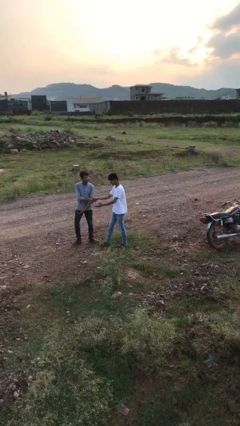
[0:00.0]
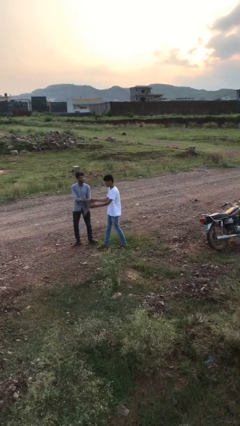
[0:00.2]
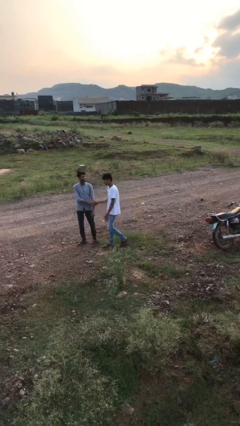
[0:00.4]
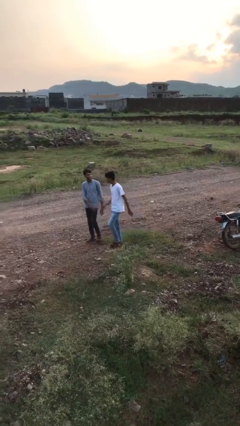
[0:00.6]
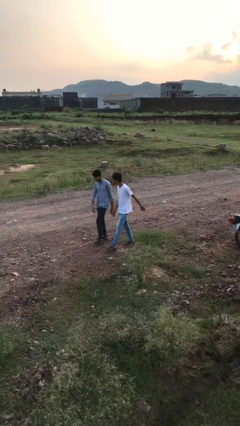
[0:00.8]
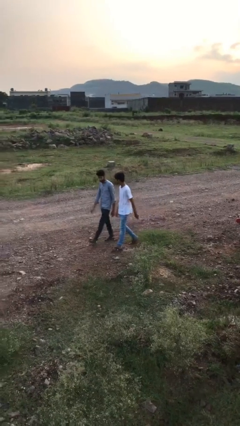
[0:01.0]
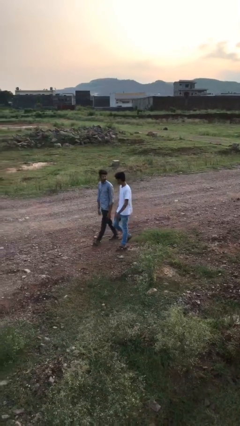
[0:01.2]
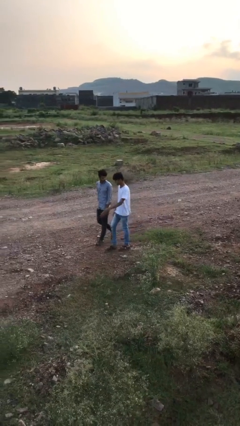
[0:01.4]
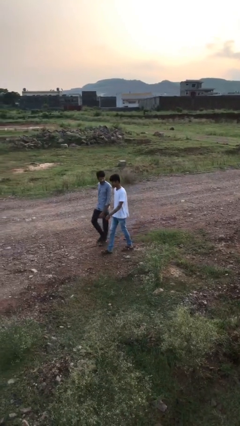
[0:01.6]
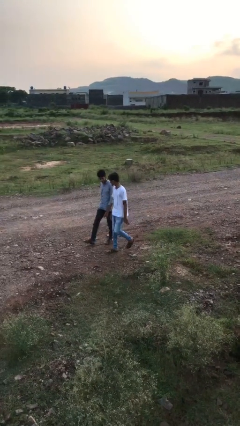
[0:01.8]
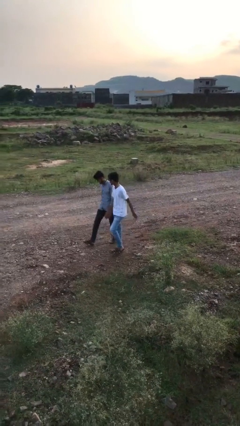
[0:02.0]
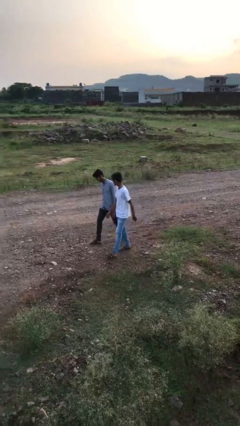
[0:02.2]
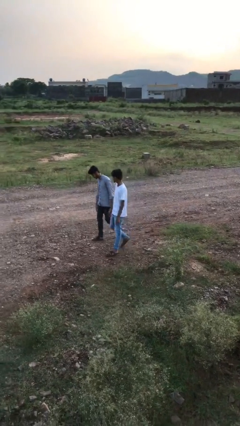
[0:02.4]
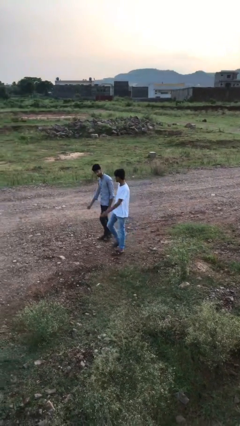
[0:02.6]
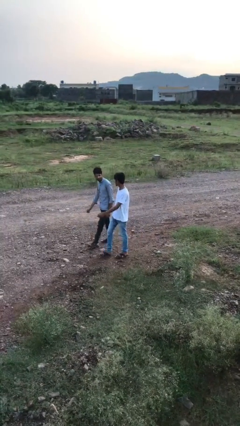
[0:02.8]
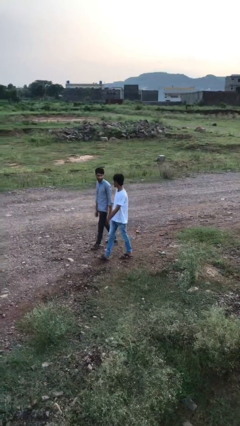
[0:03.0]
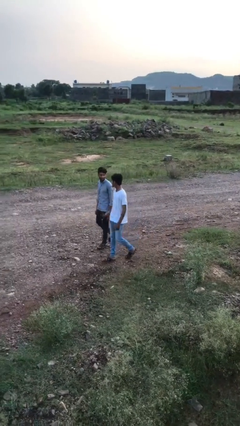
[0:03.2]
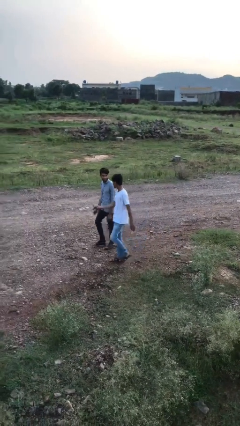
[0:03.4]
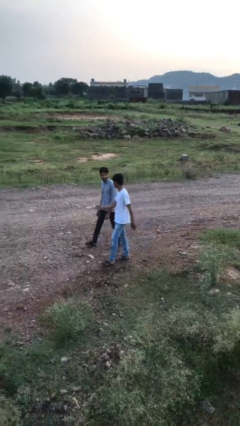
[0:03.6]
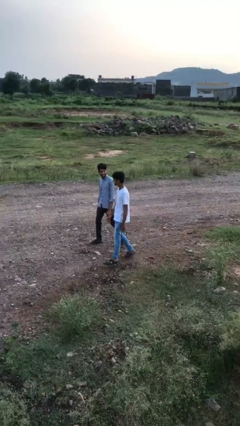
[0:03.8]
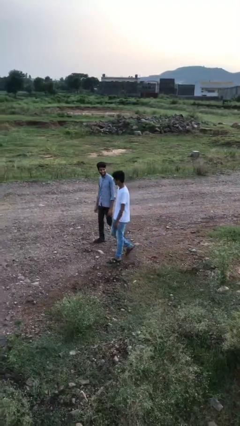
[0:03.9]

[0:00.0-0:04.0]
person talks to person

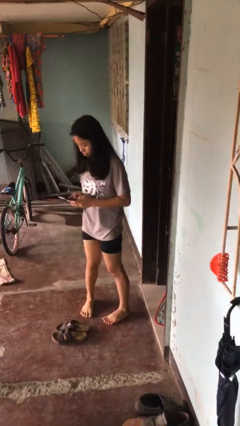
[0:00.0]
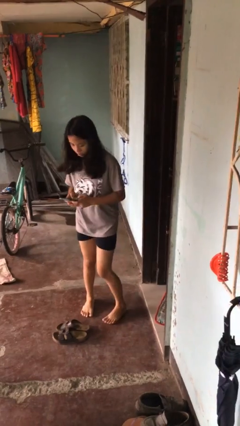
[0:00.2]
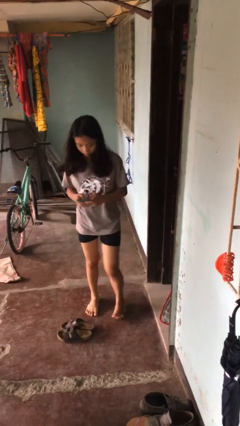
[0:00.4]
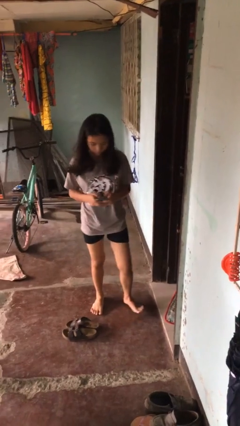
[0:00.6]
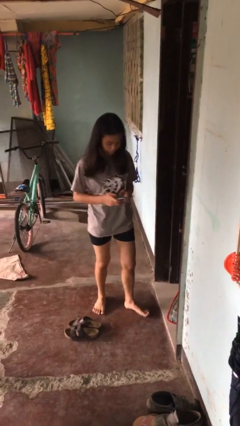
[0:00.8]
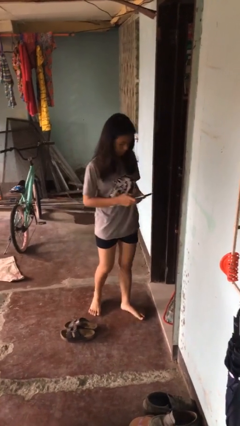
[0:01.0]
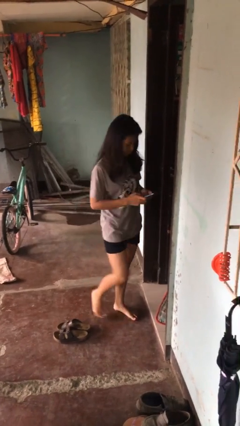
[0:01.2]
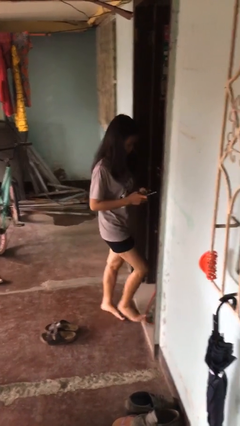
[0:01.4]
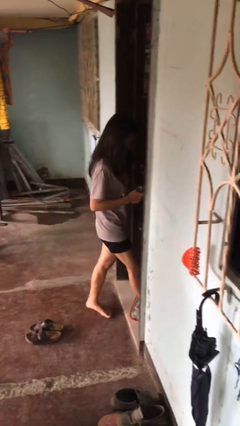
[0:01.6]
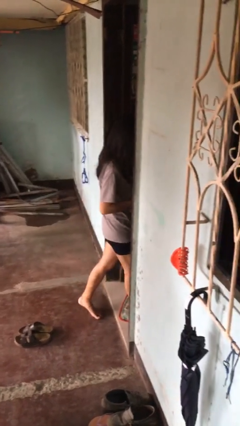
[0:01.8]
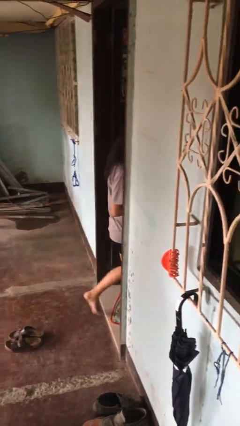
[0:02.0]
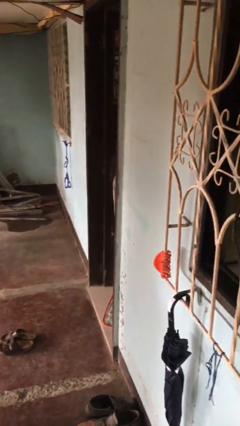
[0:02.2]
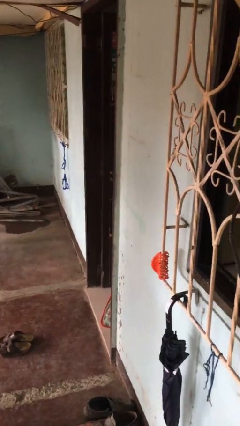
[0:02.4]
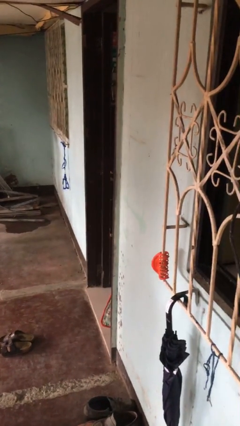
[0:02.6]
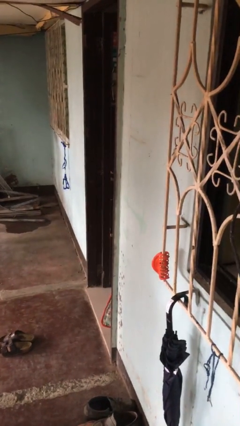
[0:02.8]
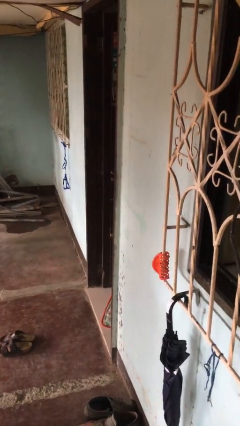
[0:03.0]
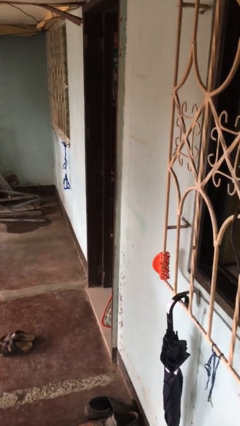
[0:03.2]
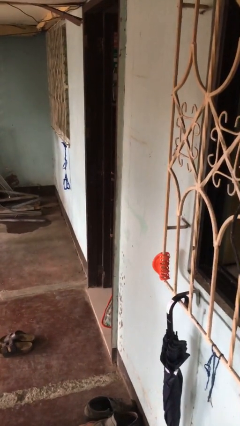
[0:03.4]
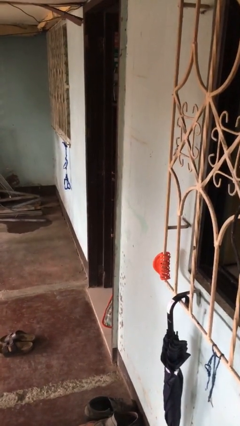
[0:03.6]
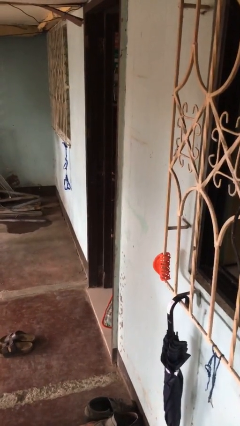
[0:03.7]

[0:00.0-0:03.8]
person exits scene through structure

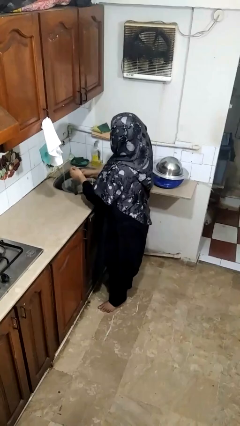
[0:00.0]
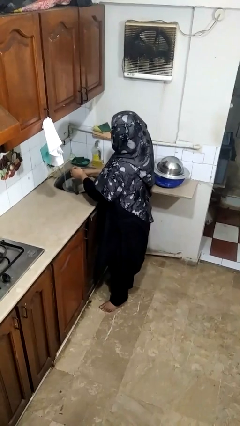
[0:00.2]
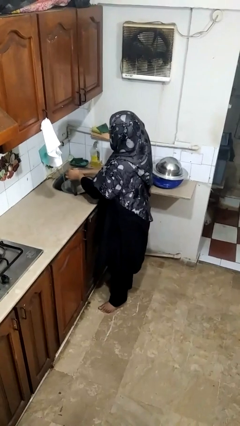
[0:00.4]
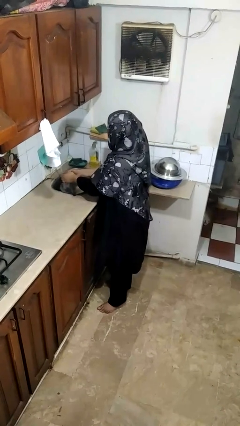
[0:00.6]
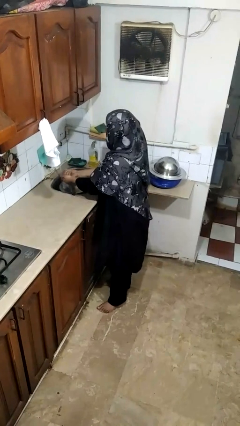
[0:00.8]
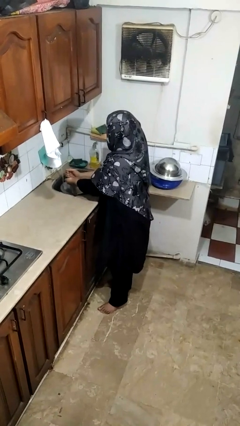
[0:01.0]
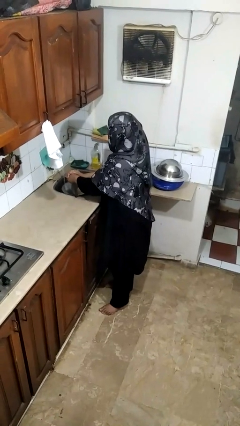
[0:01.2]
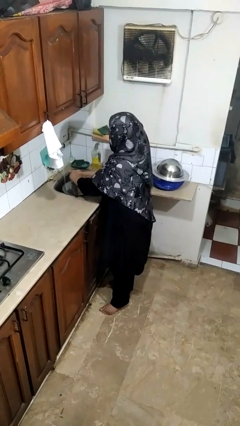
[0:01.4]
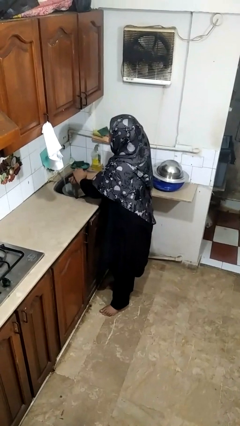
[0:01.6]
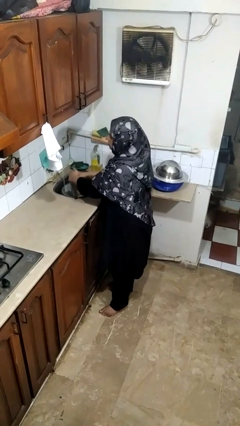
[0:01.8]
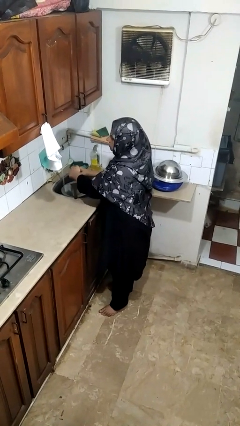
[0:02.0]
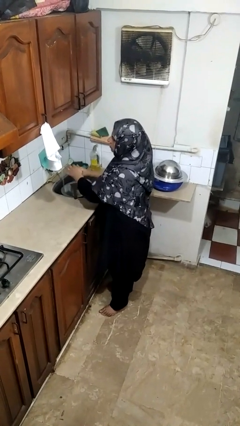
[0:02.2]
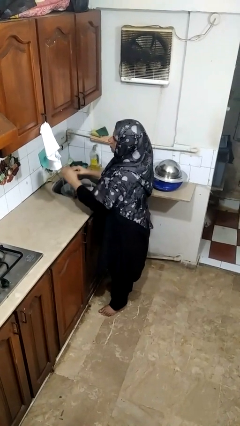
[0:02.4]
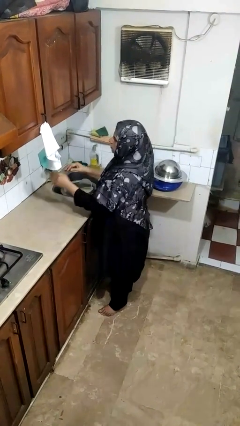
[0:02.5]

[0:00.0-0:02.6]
person washes hands

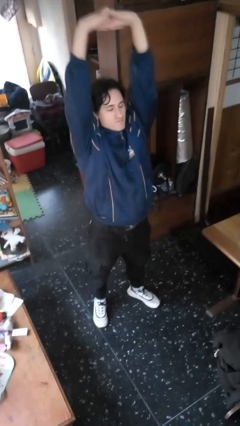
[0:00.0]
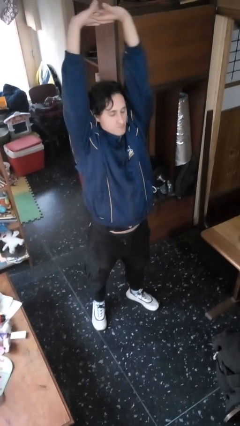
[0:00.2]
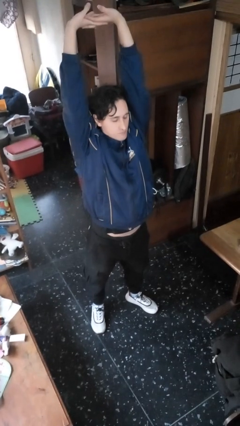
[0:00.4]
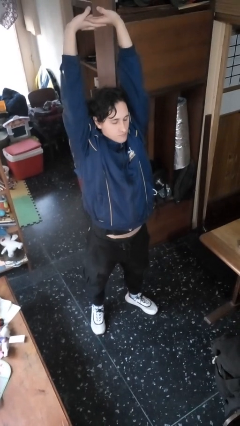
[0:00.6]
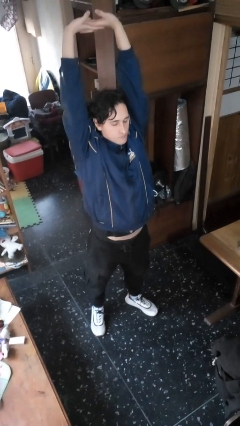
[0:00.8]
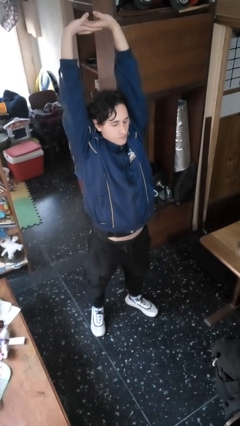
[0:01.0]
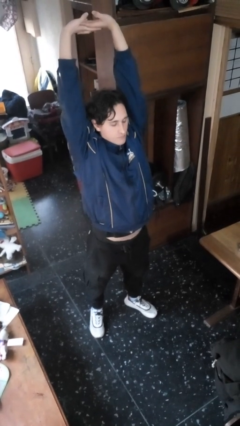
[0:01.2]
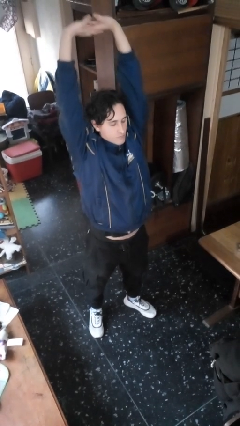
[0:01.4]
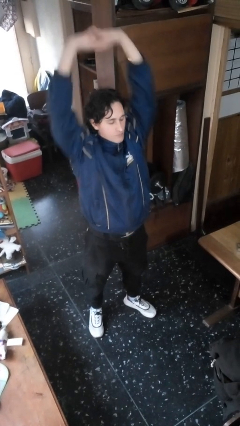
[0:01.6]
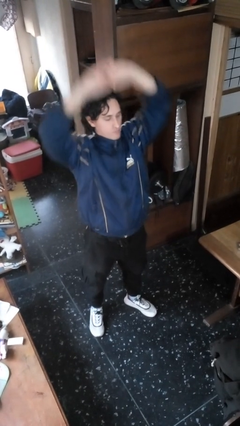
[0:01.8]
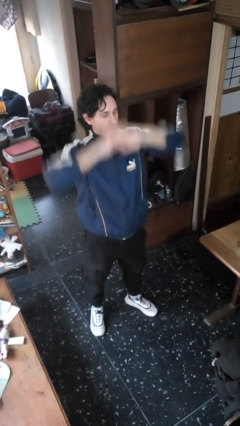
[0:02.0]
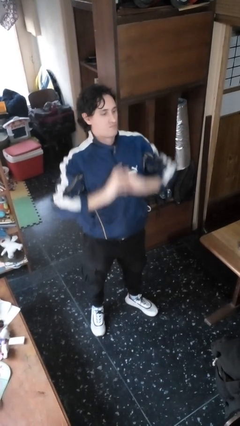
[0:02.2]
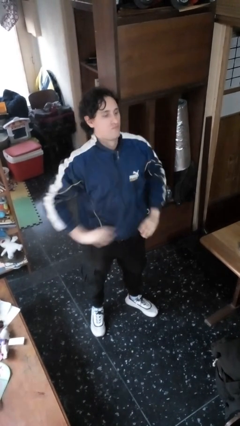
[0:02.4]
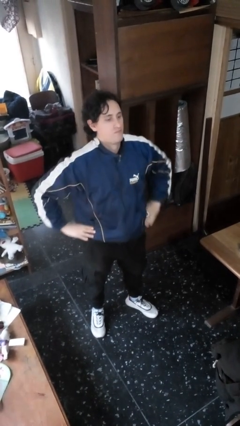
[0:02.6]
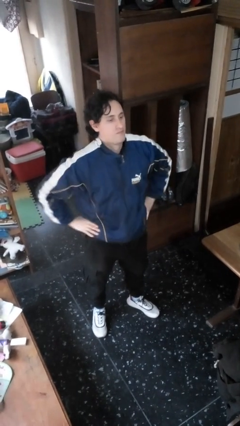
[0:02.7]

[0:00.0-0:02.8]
person stretches arms over head

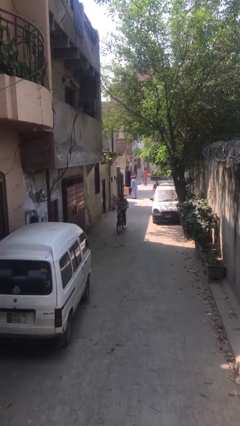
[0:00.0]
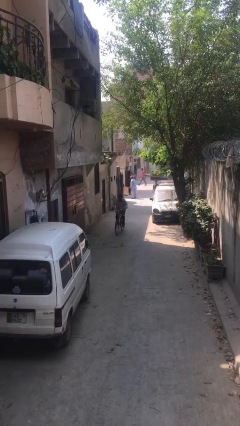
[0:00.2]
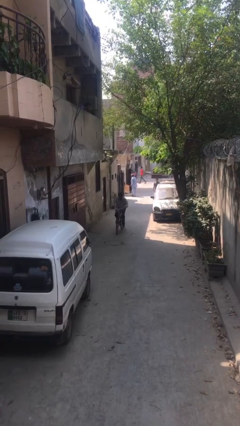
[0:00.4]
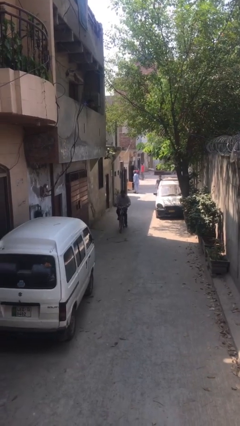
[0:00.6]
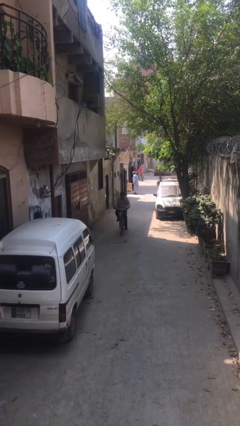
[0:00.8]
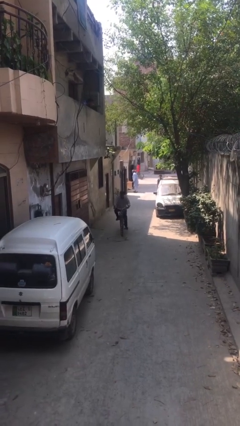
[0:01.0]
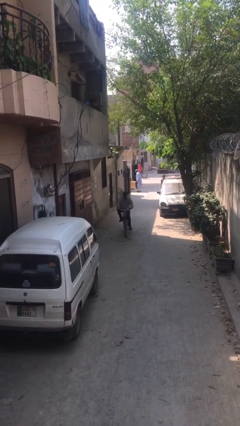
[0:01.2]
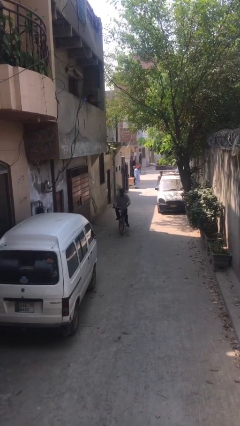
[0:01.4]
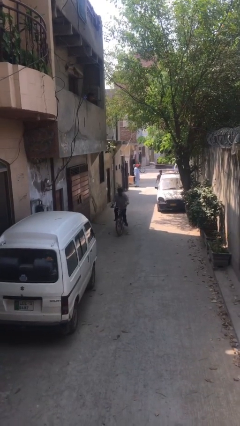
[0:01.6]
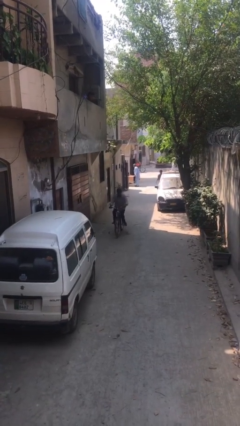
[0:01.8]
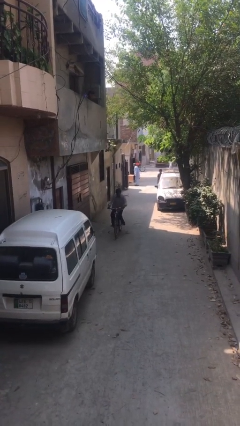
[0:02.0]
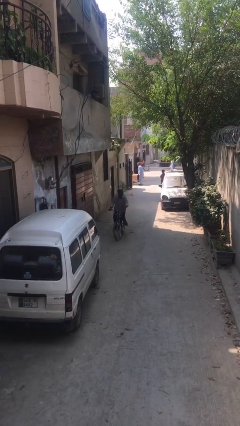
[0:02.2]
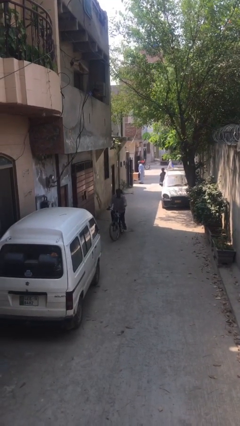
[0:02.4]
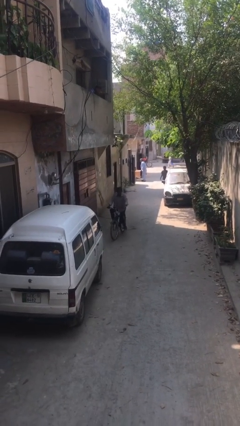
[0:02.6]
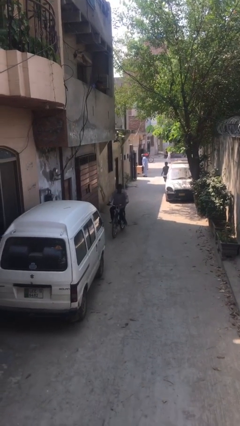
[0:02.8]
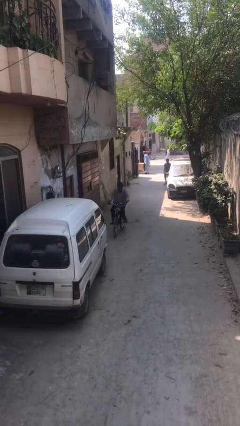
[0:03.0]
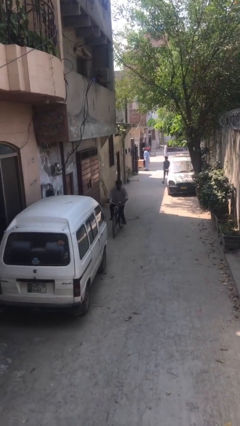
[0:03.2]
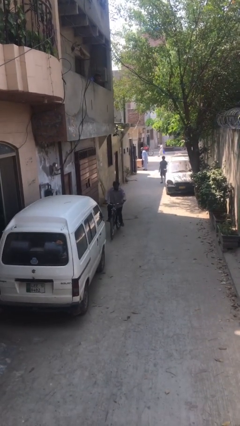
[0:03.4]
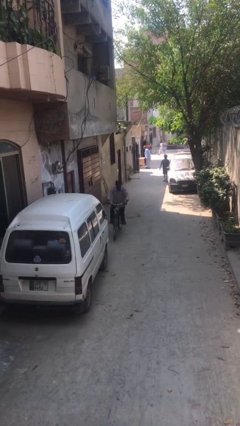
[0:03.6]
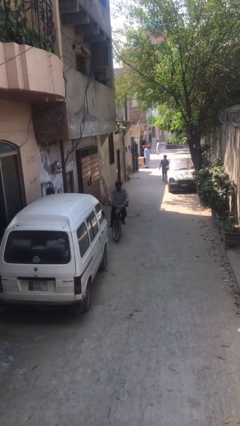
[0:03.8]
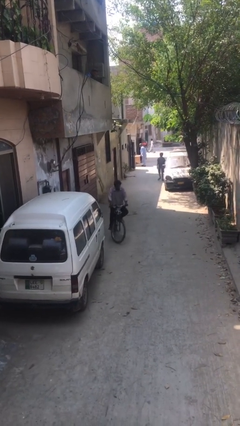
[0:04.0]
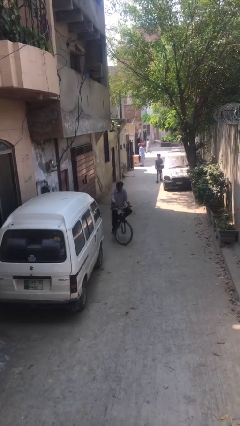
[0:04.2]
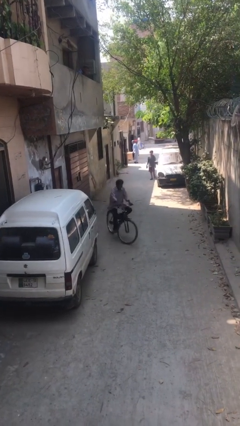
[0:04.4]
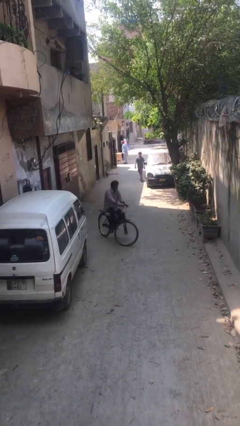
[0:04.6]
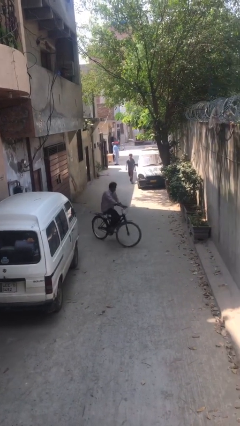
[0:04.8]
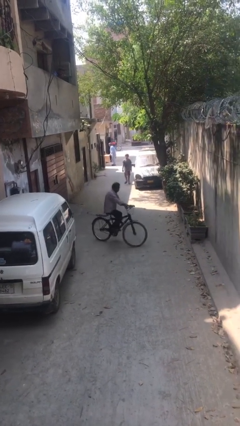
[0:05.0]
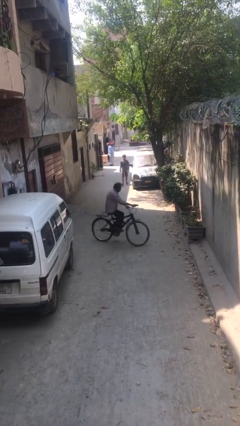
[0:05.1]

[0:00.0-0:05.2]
person rides bicycle
